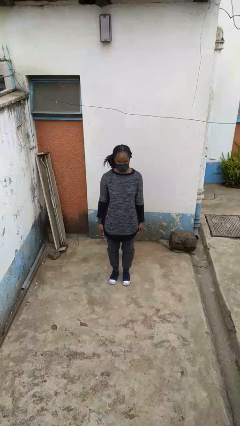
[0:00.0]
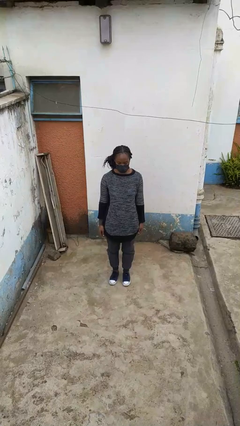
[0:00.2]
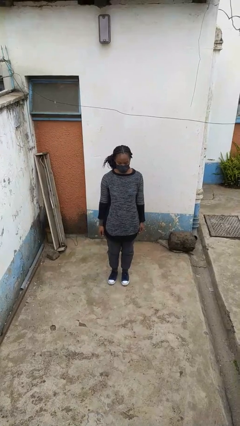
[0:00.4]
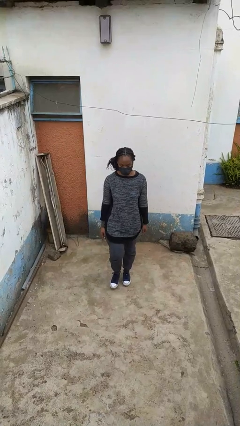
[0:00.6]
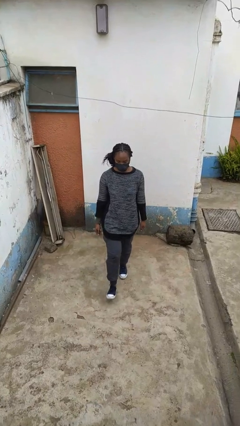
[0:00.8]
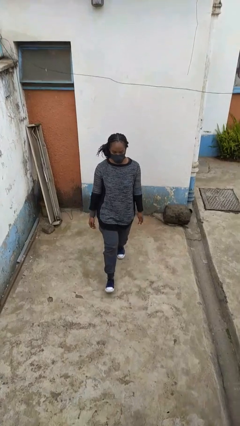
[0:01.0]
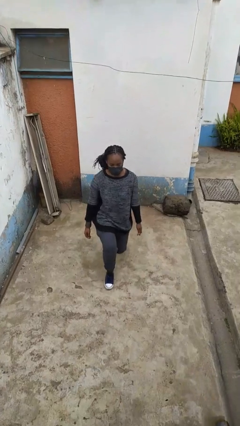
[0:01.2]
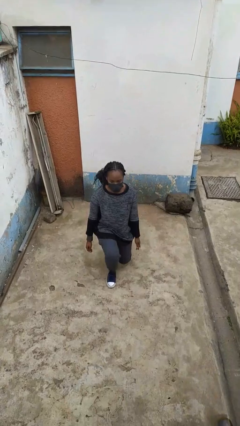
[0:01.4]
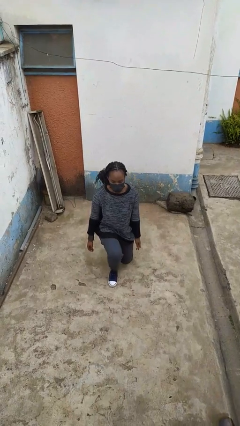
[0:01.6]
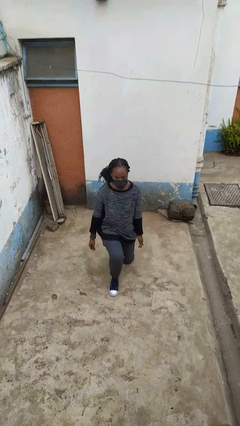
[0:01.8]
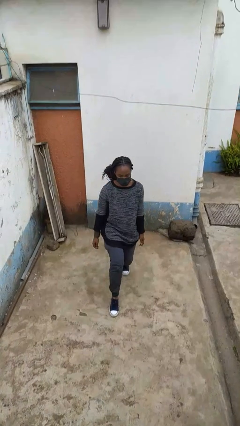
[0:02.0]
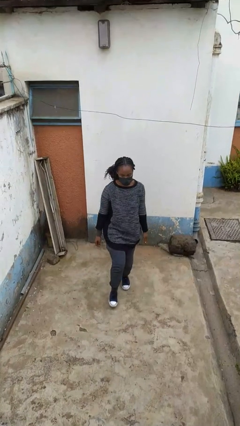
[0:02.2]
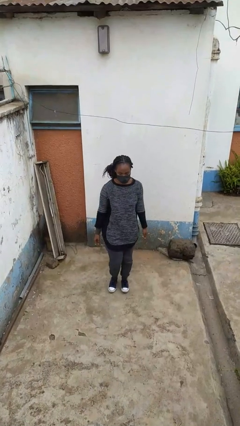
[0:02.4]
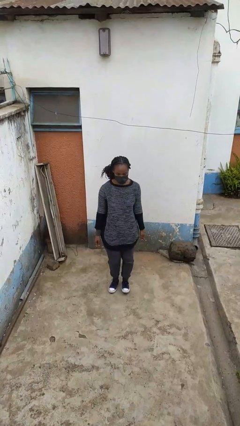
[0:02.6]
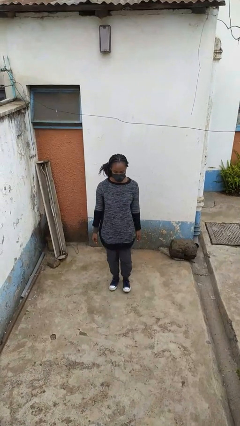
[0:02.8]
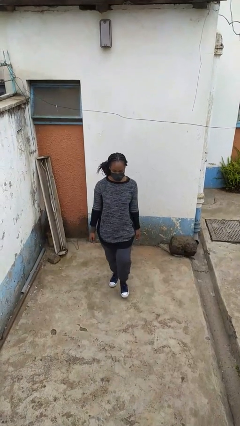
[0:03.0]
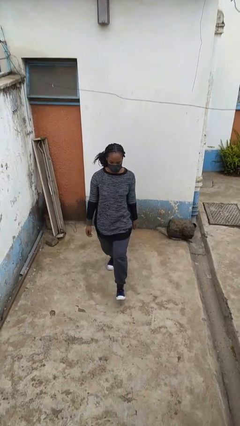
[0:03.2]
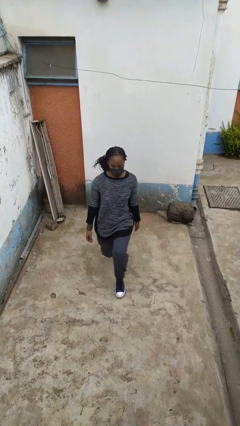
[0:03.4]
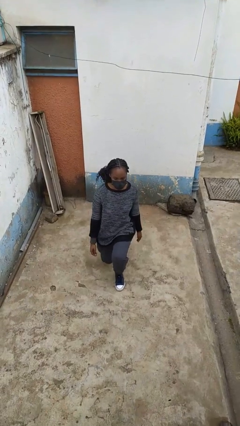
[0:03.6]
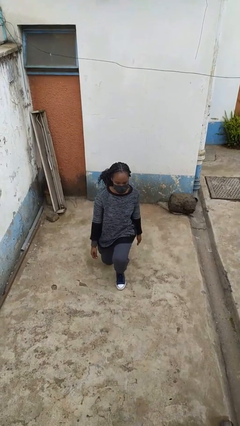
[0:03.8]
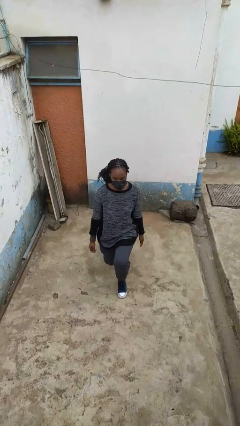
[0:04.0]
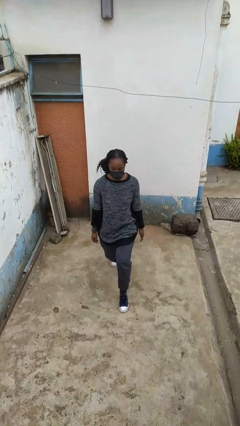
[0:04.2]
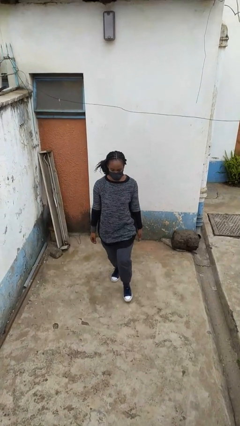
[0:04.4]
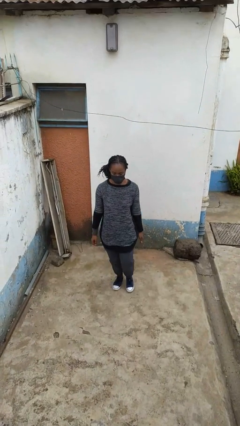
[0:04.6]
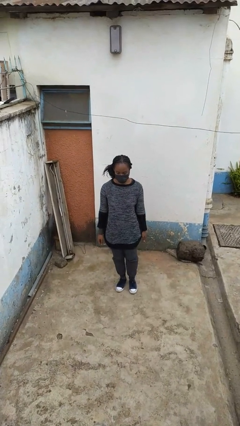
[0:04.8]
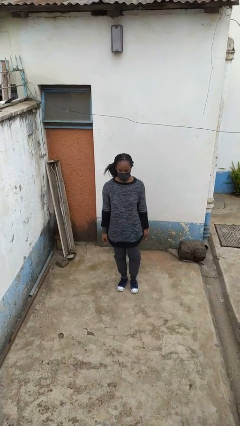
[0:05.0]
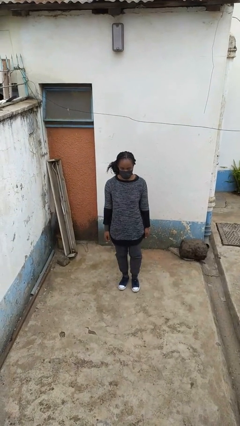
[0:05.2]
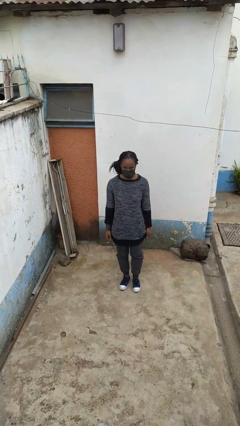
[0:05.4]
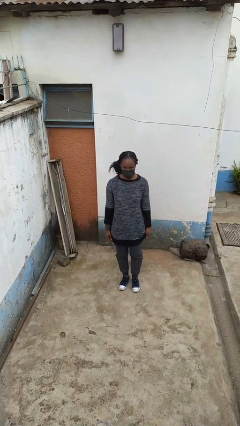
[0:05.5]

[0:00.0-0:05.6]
person exercises with lunges

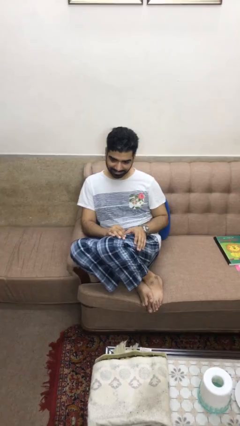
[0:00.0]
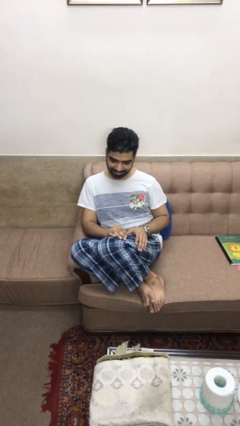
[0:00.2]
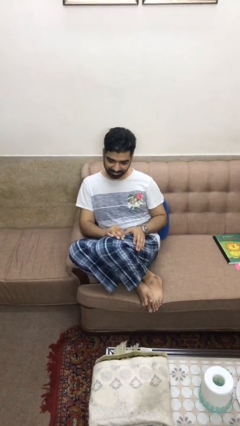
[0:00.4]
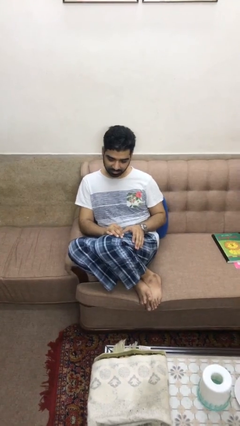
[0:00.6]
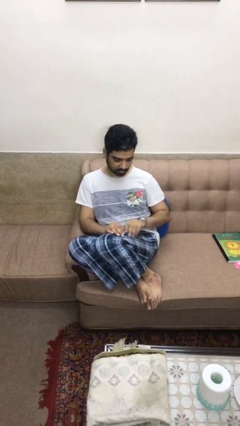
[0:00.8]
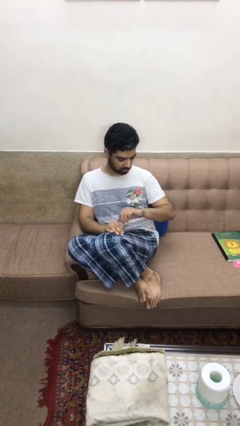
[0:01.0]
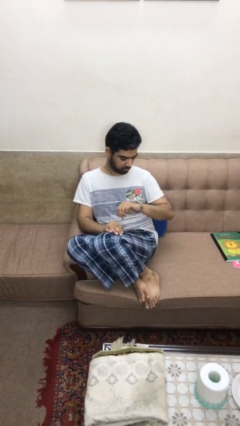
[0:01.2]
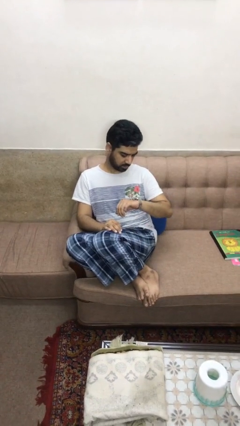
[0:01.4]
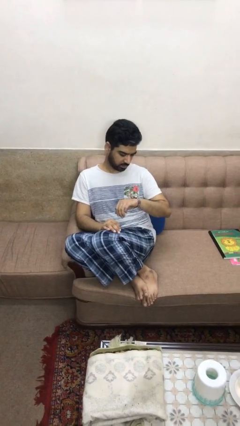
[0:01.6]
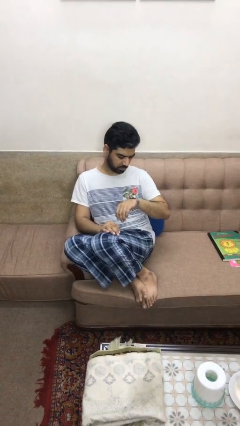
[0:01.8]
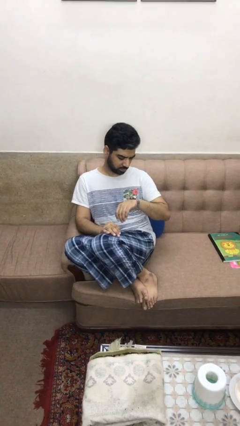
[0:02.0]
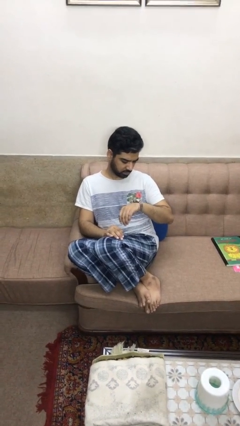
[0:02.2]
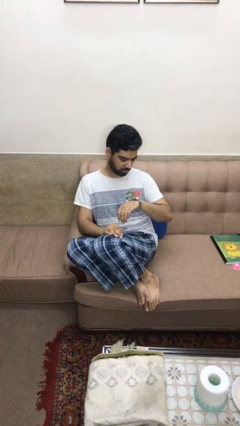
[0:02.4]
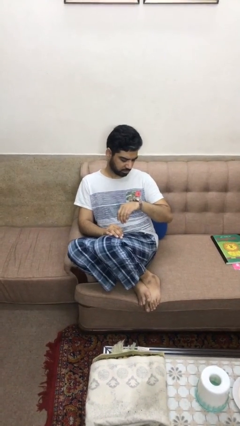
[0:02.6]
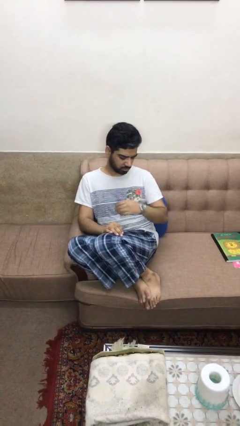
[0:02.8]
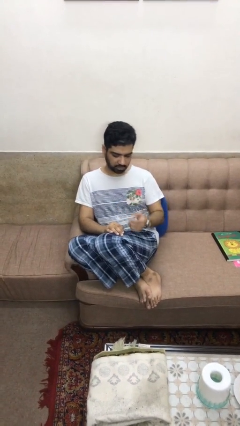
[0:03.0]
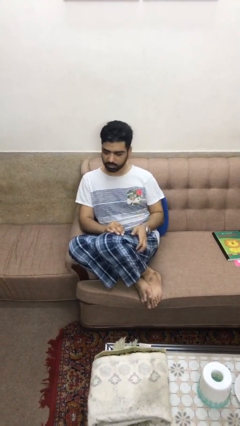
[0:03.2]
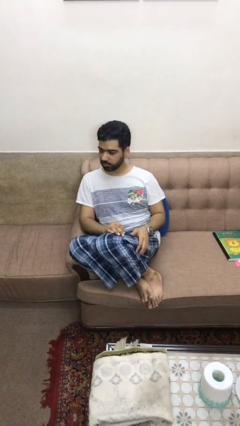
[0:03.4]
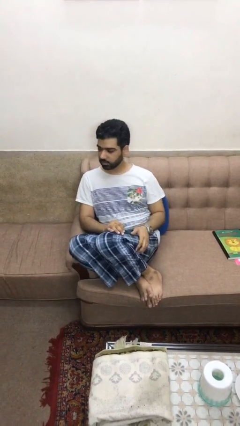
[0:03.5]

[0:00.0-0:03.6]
person looks at wristwatch

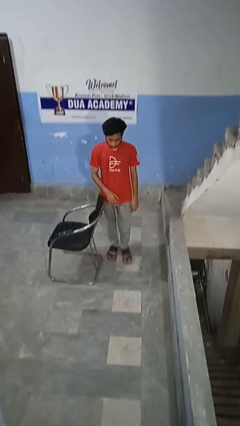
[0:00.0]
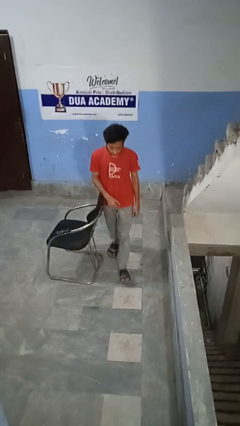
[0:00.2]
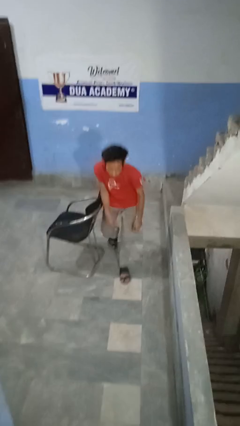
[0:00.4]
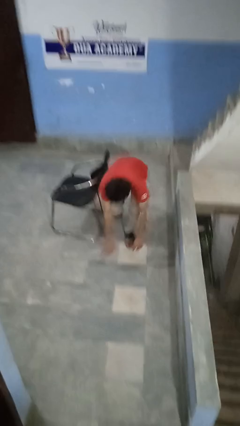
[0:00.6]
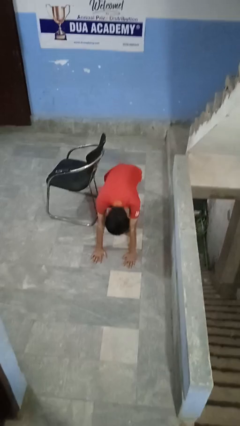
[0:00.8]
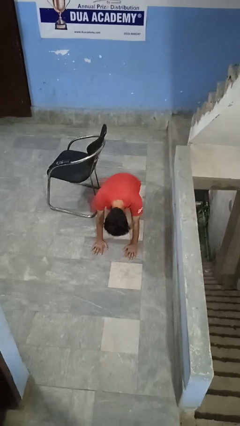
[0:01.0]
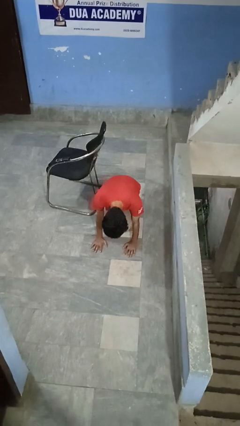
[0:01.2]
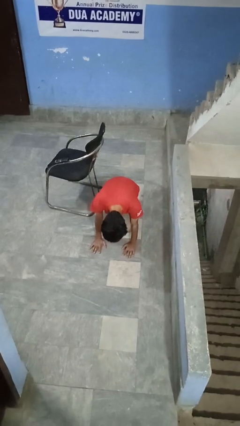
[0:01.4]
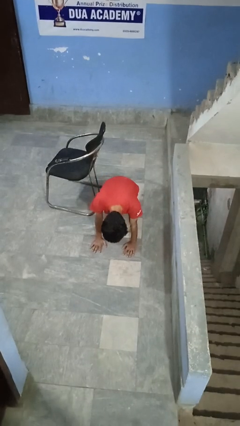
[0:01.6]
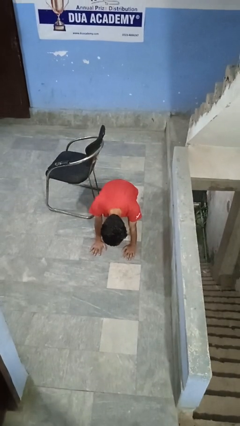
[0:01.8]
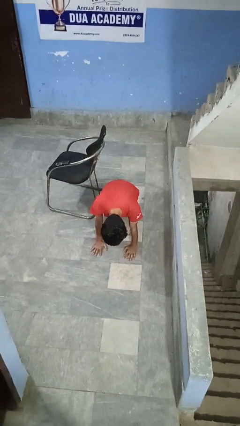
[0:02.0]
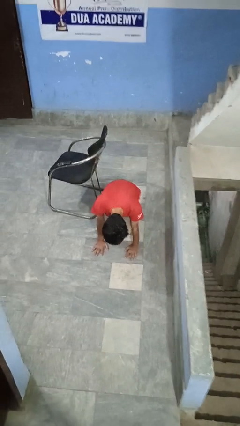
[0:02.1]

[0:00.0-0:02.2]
person trips on object on floor

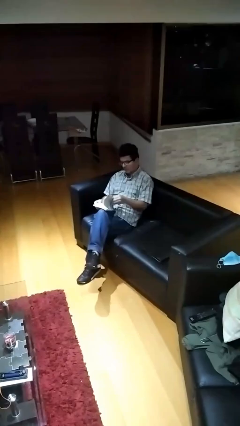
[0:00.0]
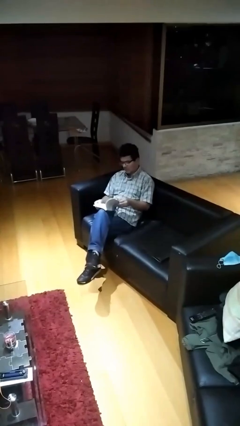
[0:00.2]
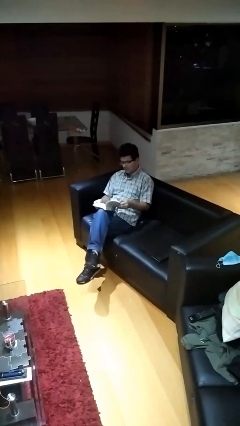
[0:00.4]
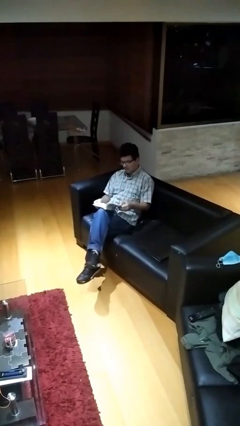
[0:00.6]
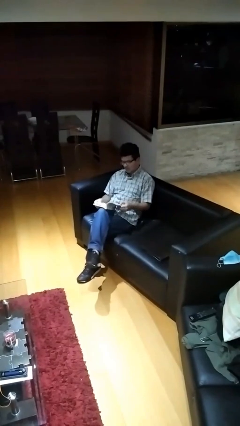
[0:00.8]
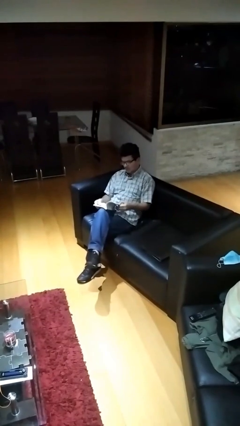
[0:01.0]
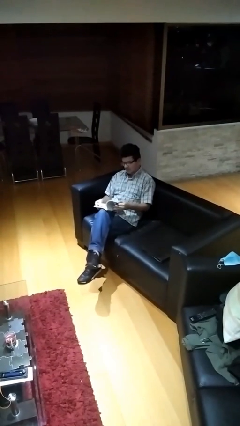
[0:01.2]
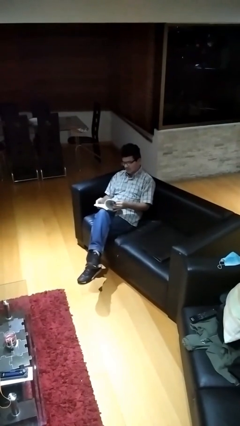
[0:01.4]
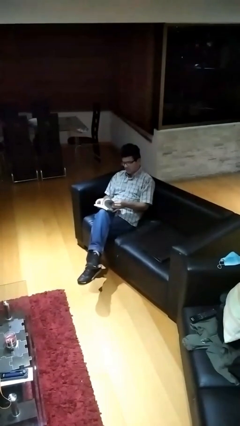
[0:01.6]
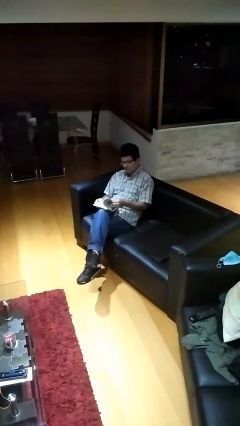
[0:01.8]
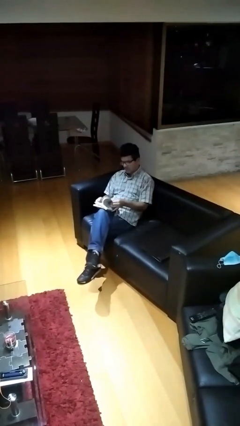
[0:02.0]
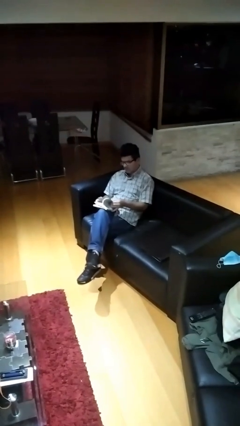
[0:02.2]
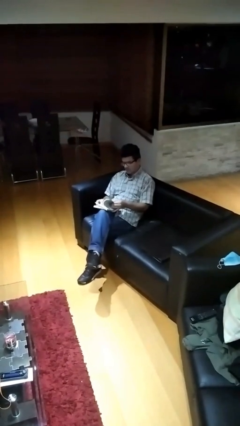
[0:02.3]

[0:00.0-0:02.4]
person reads document

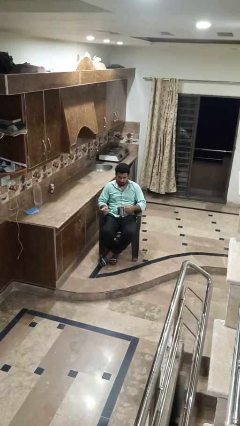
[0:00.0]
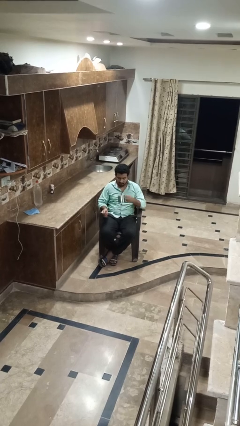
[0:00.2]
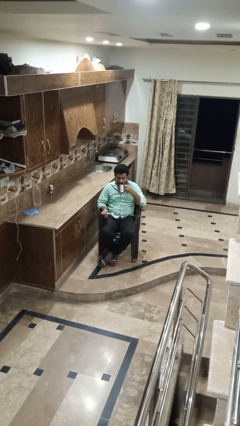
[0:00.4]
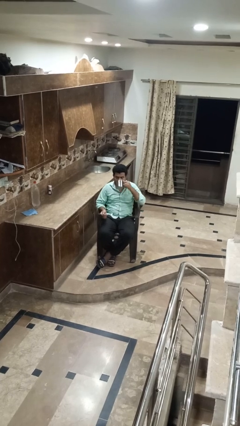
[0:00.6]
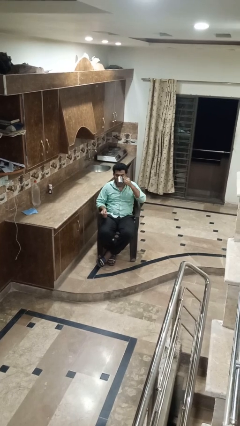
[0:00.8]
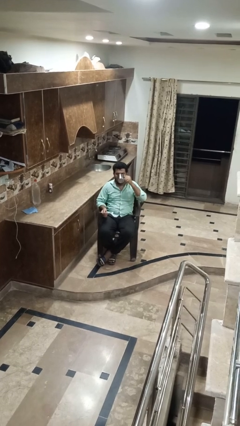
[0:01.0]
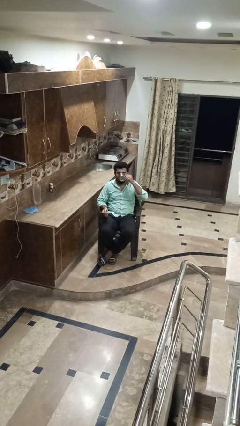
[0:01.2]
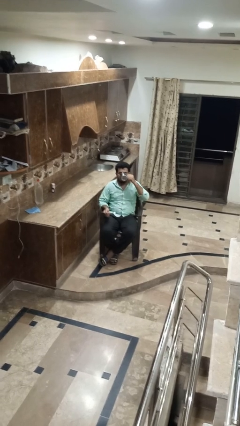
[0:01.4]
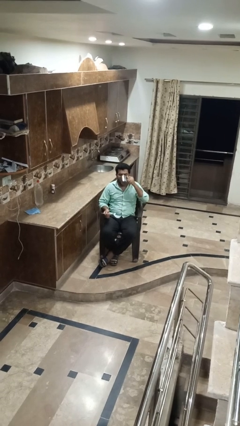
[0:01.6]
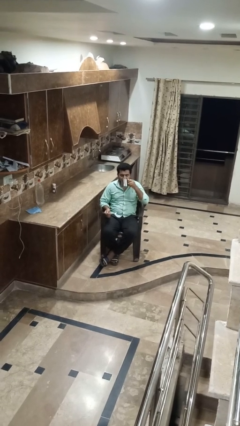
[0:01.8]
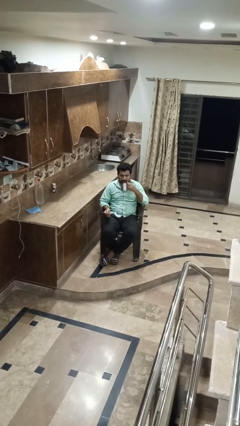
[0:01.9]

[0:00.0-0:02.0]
person drinks from mug

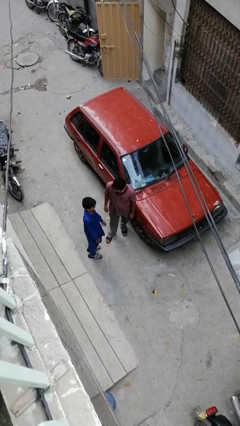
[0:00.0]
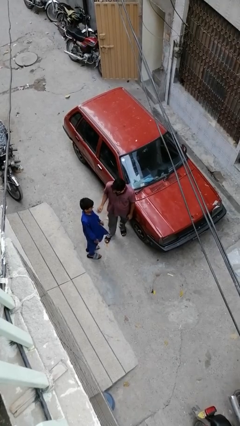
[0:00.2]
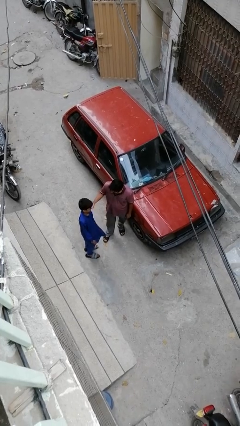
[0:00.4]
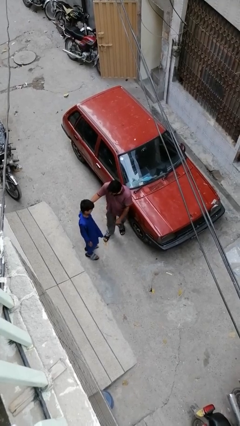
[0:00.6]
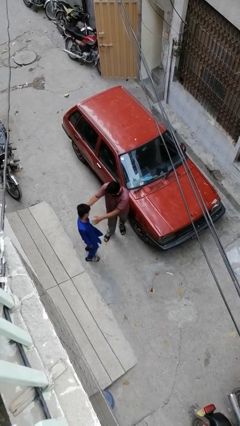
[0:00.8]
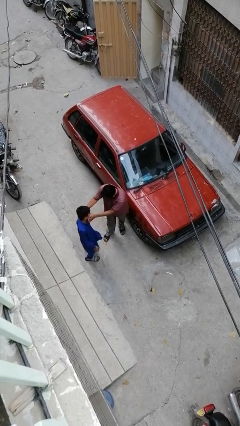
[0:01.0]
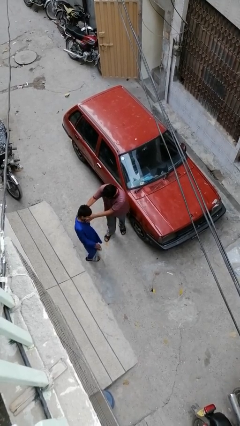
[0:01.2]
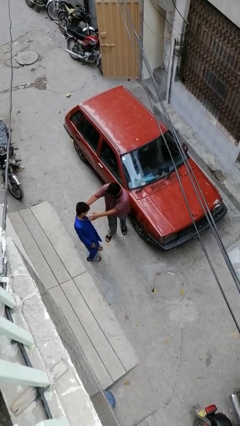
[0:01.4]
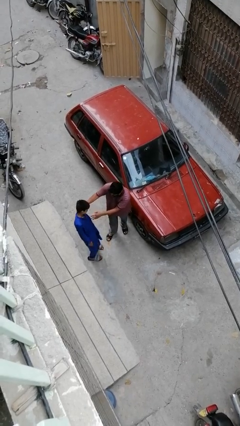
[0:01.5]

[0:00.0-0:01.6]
person grabs person by shoulder

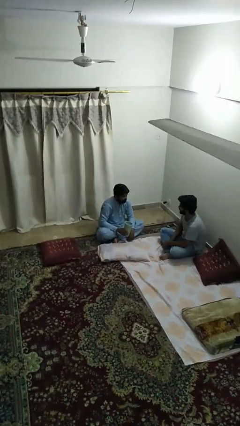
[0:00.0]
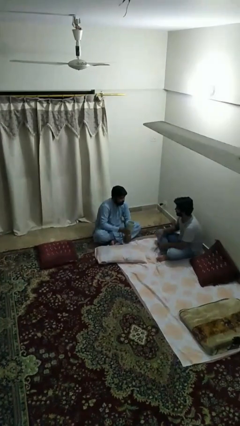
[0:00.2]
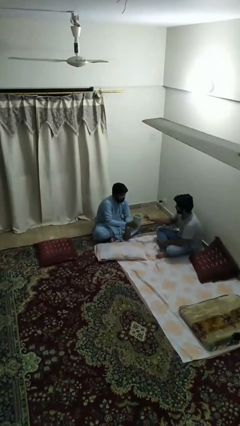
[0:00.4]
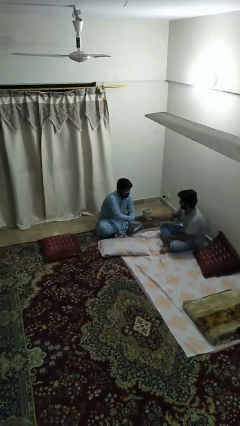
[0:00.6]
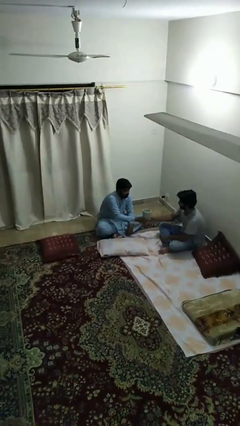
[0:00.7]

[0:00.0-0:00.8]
person transfers object to person
